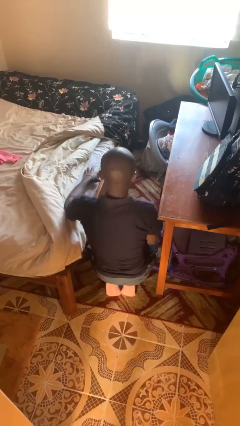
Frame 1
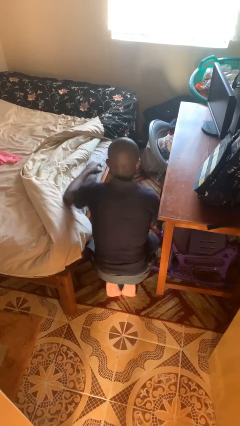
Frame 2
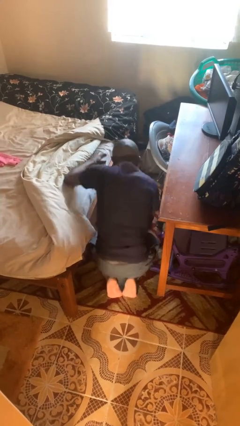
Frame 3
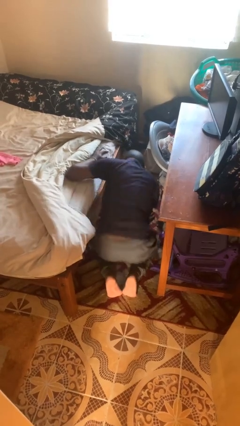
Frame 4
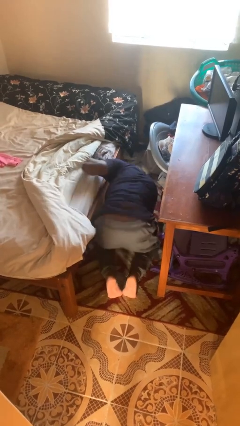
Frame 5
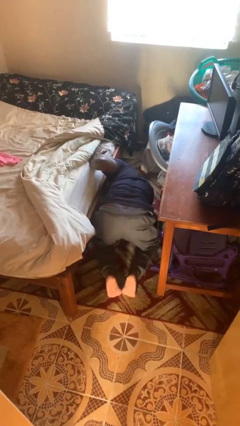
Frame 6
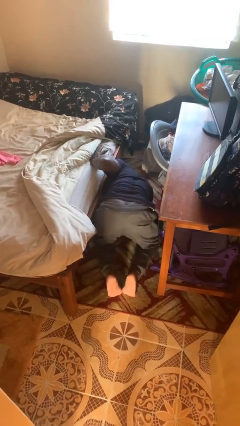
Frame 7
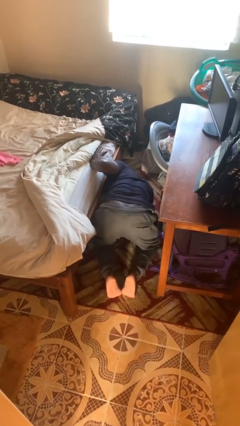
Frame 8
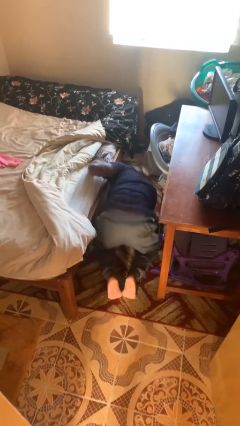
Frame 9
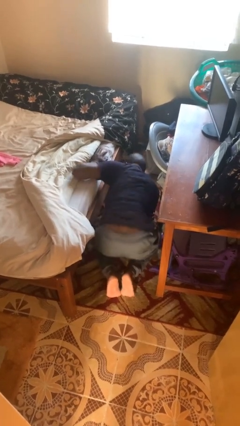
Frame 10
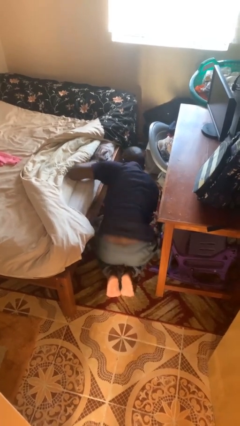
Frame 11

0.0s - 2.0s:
person searches under bed

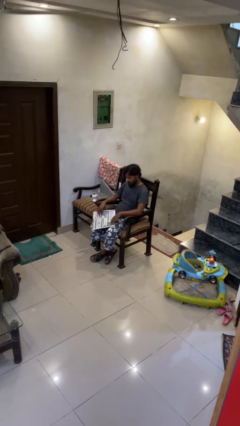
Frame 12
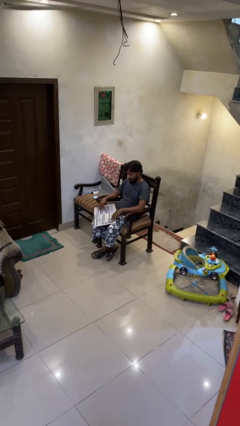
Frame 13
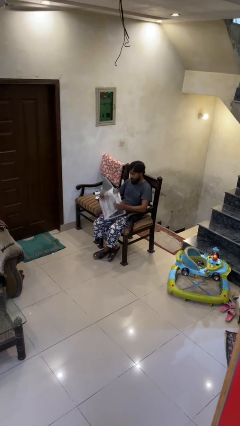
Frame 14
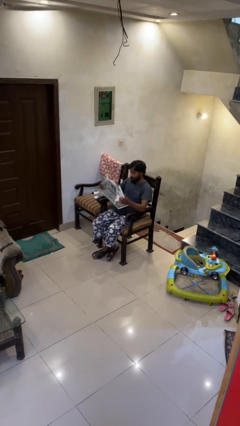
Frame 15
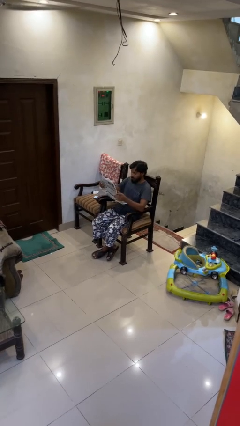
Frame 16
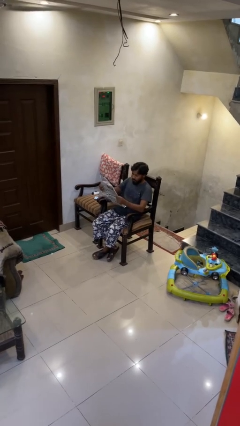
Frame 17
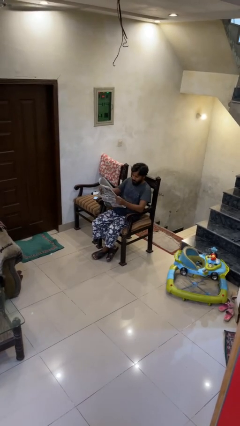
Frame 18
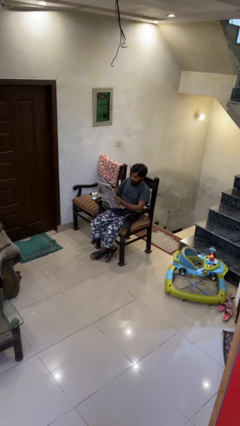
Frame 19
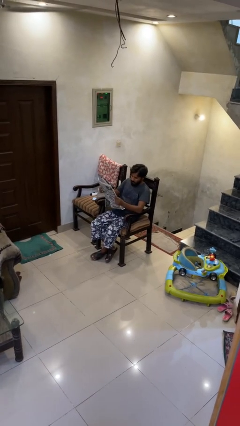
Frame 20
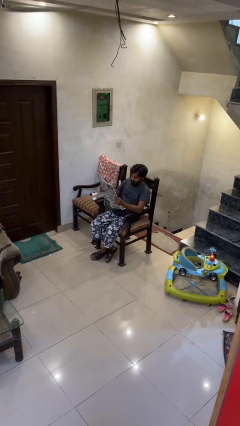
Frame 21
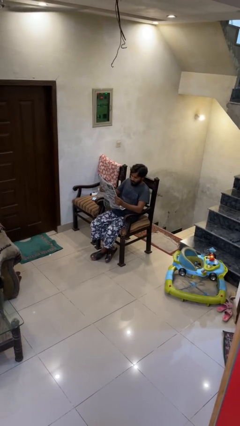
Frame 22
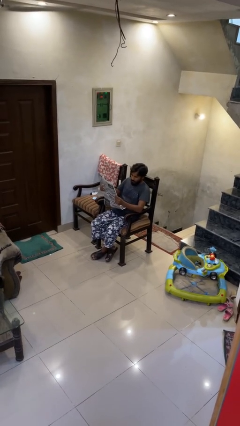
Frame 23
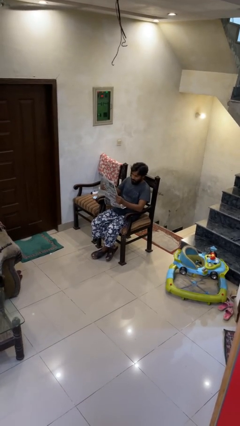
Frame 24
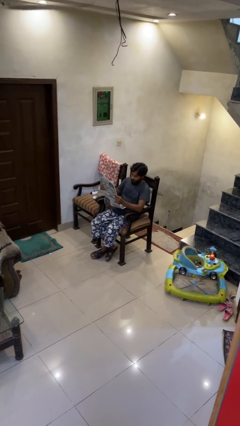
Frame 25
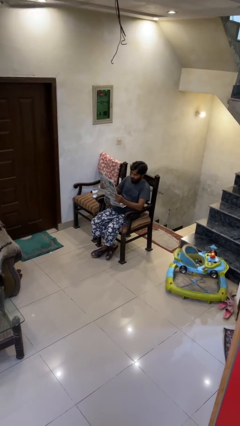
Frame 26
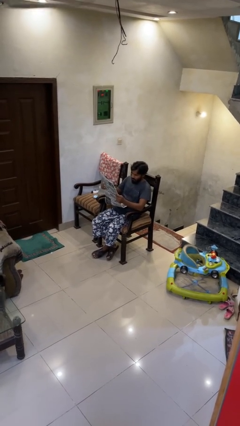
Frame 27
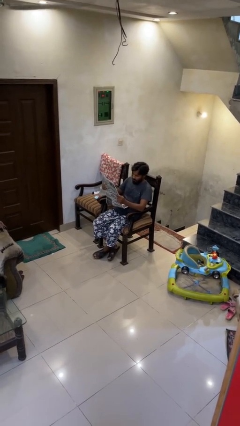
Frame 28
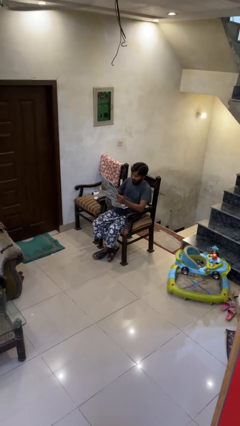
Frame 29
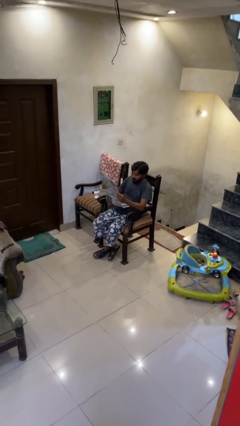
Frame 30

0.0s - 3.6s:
person reads newspaper

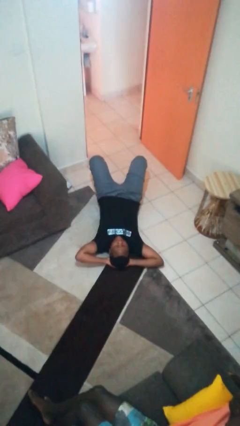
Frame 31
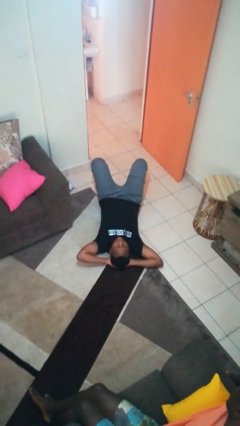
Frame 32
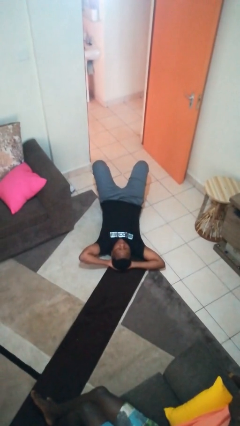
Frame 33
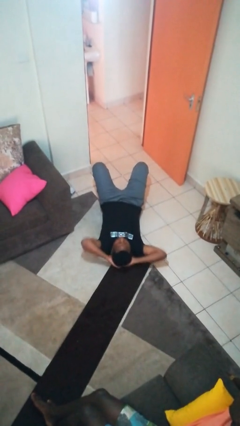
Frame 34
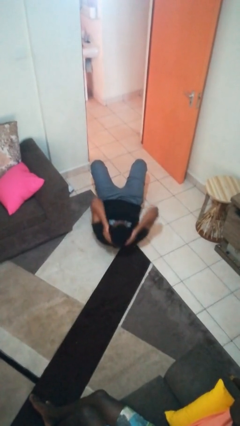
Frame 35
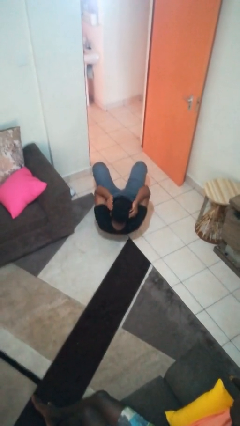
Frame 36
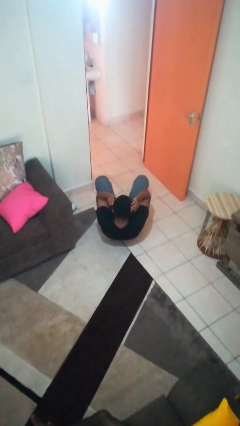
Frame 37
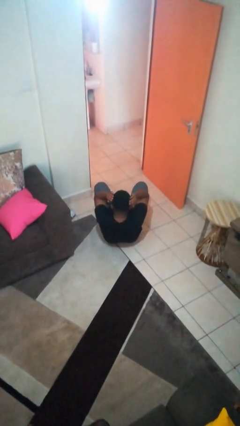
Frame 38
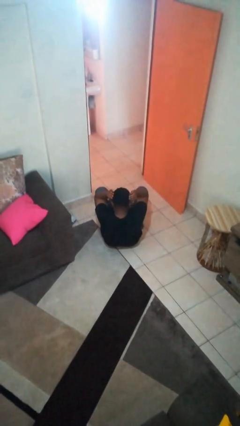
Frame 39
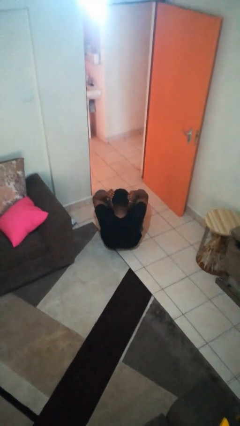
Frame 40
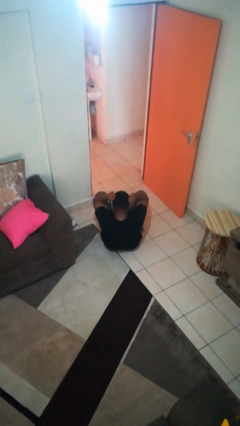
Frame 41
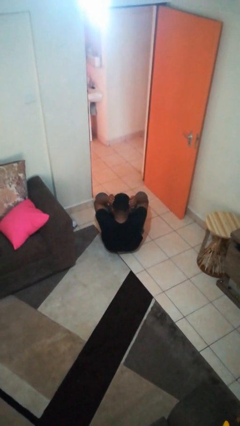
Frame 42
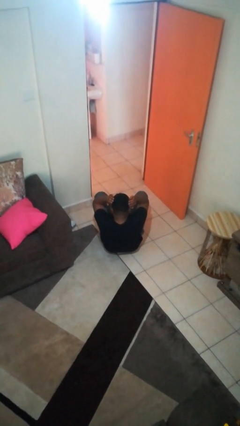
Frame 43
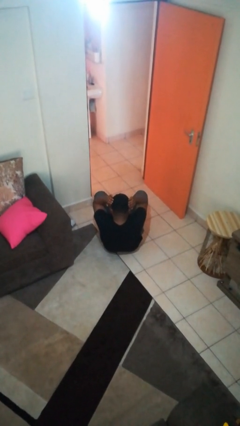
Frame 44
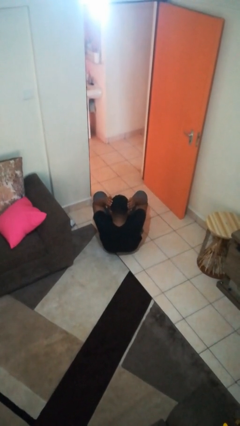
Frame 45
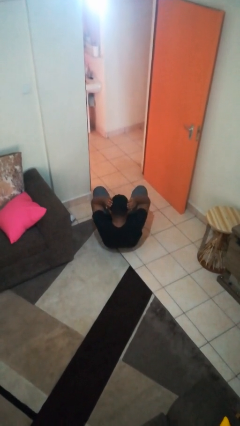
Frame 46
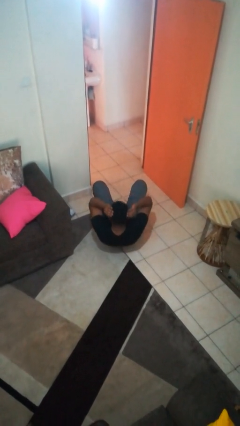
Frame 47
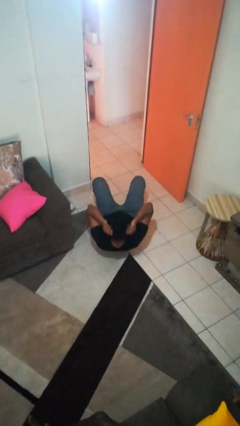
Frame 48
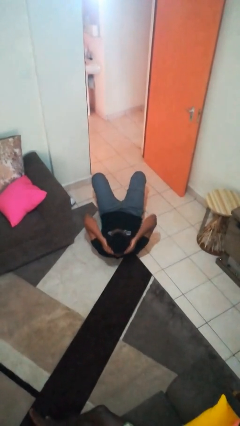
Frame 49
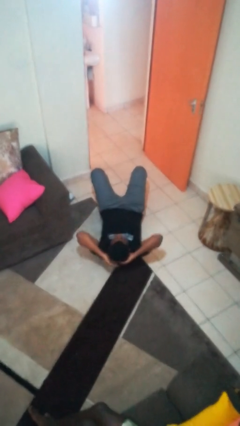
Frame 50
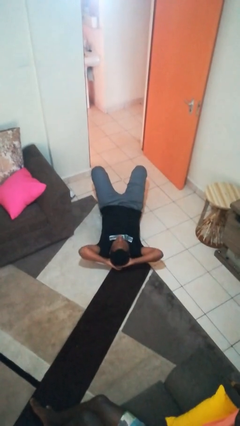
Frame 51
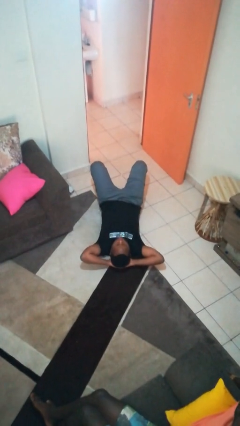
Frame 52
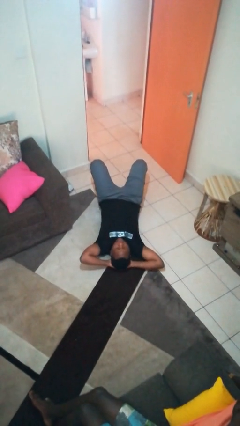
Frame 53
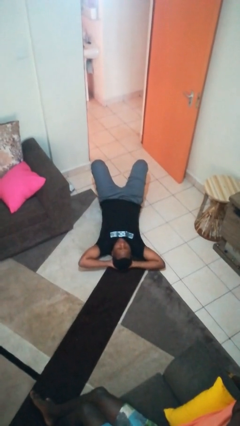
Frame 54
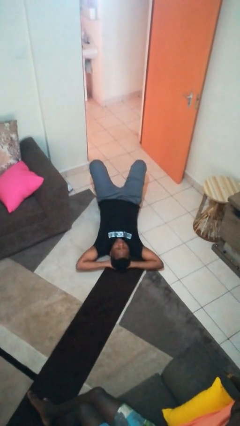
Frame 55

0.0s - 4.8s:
person exercises with situp

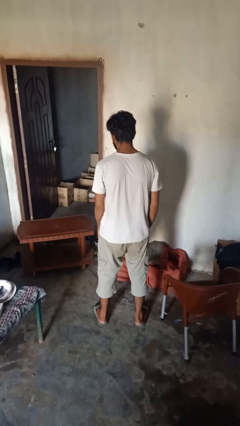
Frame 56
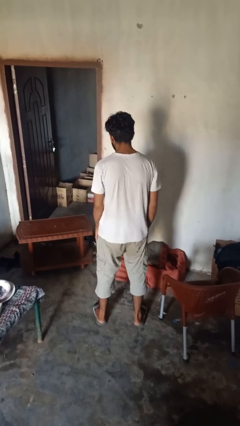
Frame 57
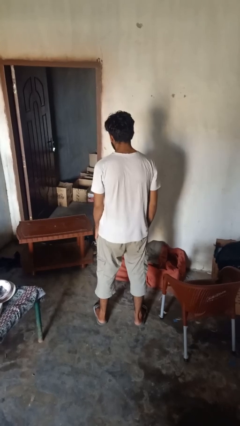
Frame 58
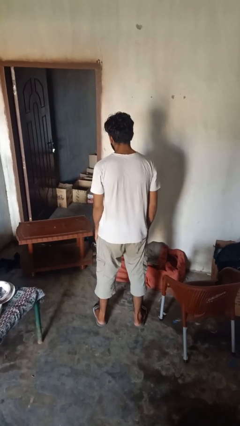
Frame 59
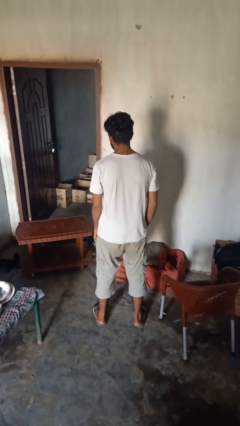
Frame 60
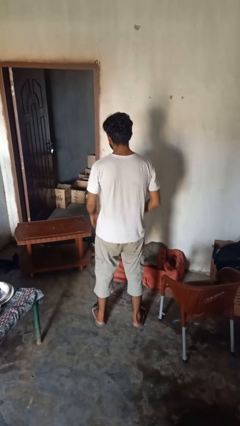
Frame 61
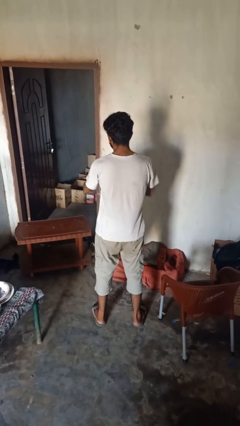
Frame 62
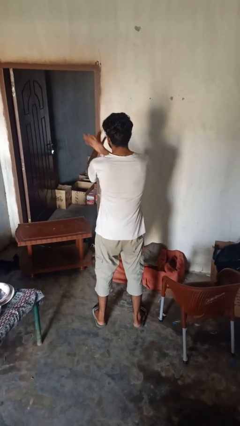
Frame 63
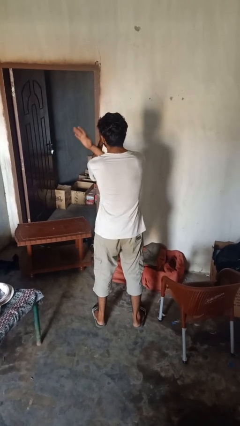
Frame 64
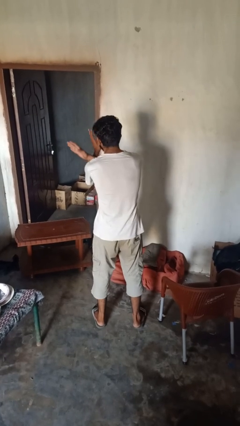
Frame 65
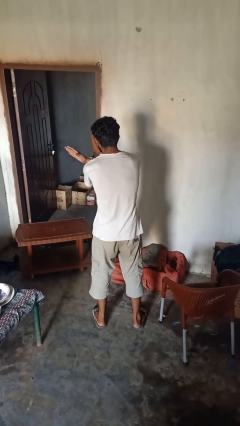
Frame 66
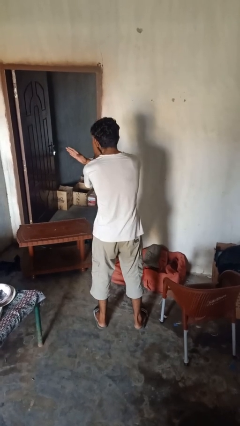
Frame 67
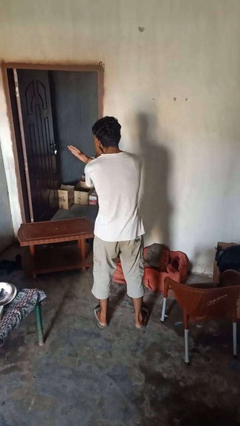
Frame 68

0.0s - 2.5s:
person crosses arms

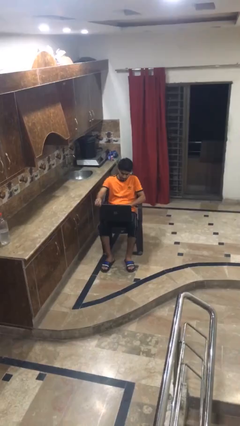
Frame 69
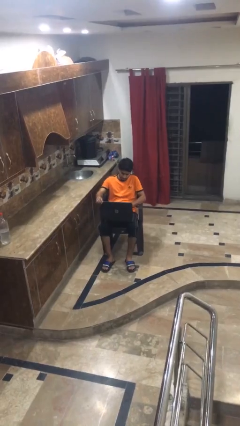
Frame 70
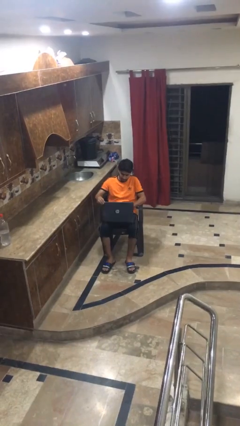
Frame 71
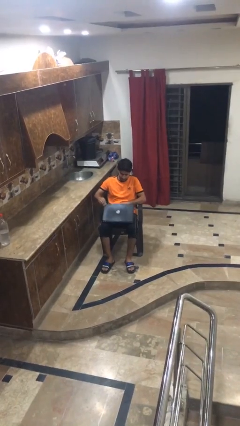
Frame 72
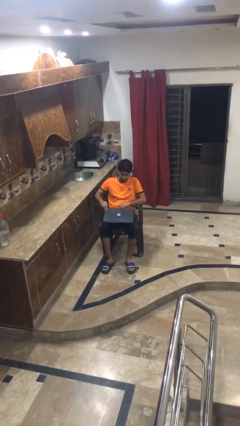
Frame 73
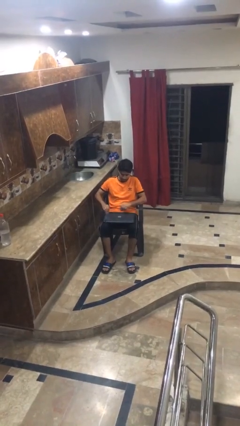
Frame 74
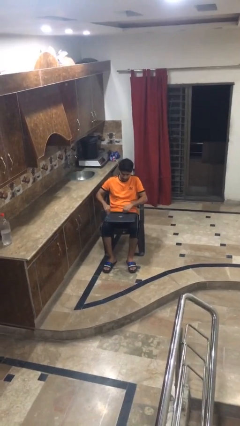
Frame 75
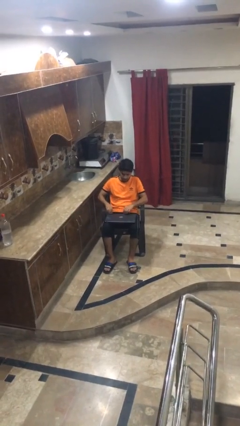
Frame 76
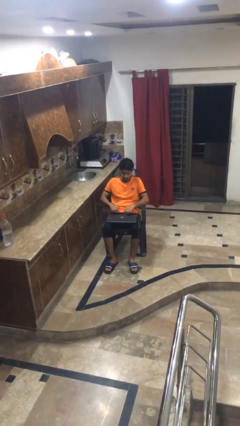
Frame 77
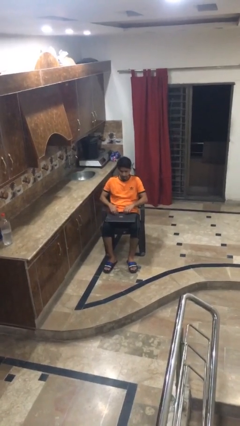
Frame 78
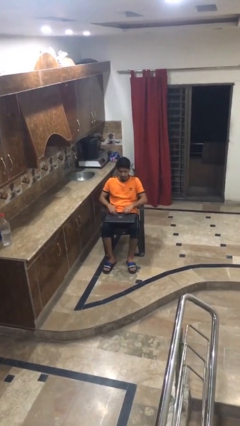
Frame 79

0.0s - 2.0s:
person closes laptop

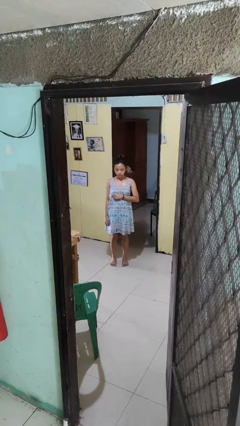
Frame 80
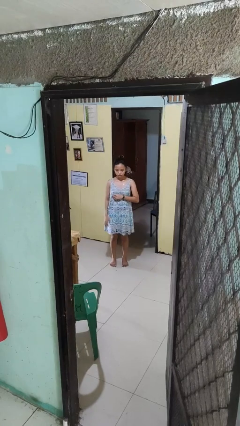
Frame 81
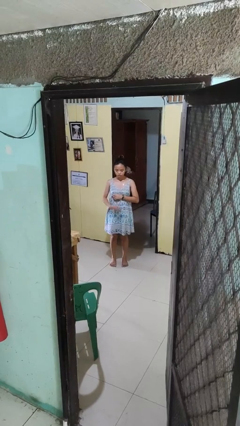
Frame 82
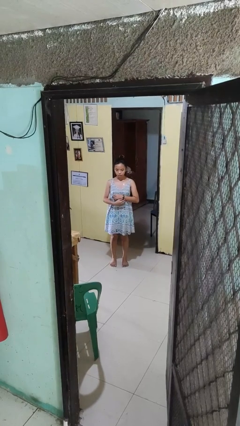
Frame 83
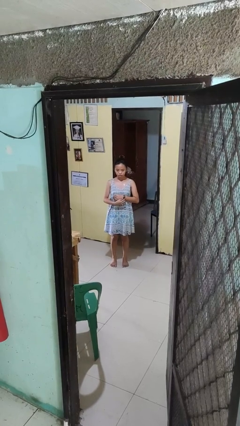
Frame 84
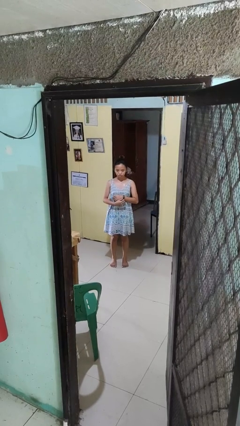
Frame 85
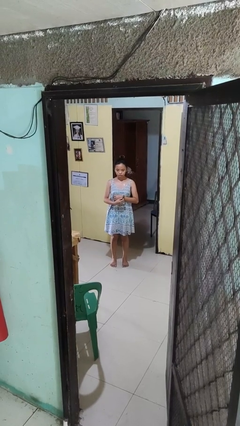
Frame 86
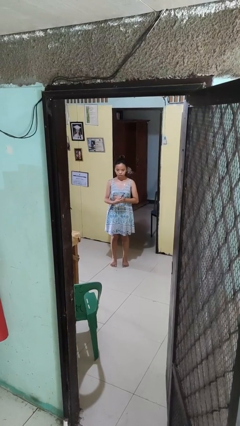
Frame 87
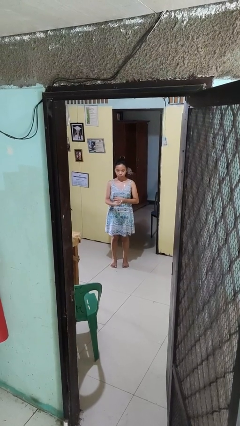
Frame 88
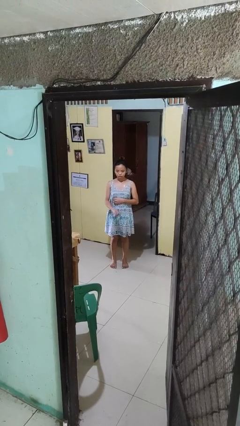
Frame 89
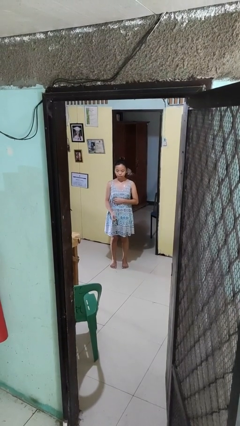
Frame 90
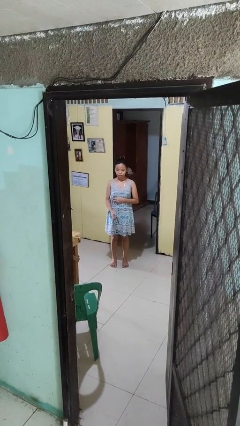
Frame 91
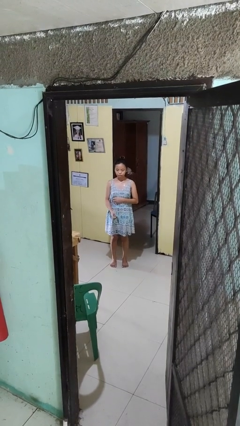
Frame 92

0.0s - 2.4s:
person takes off wristwatch

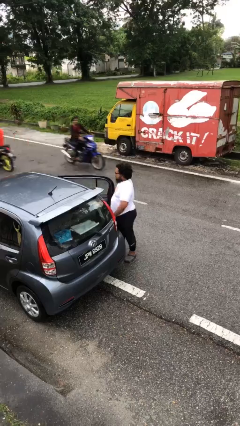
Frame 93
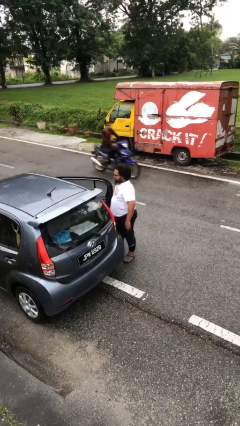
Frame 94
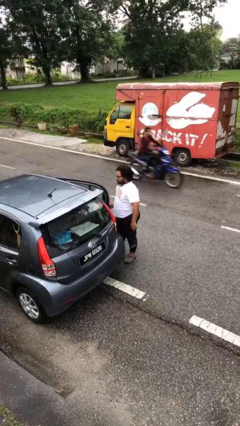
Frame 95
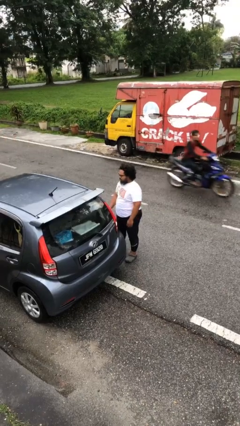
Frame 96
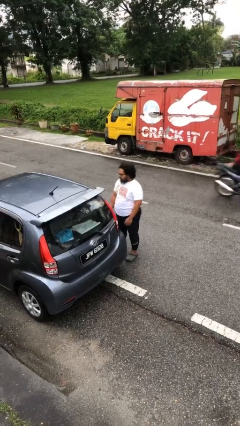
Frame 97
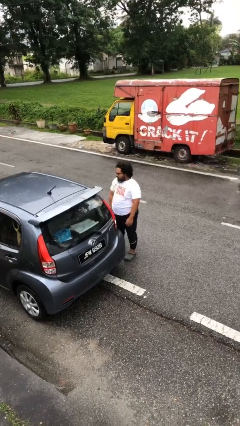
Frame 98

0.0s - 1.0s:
person closes car door
